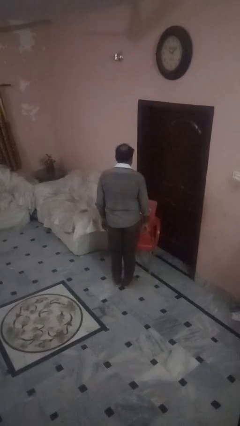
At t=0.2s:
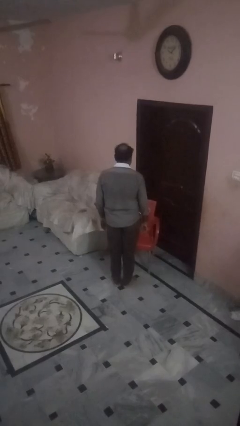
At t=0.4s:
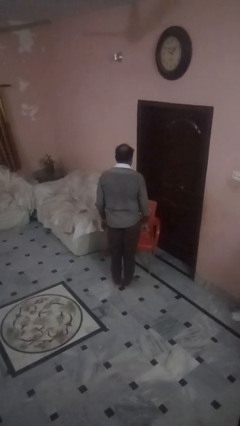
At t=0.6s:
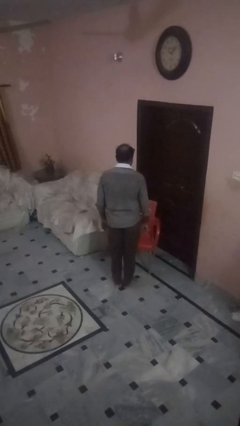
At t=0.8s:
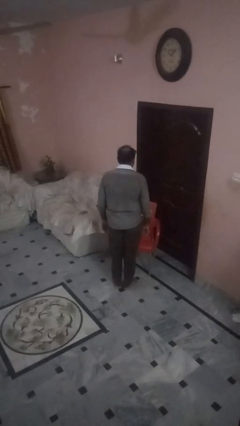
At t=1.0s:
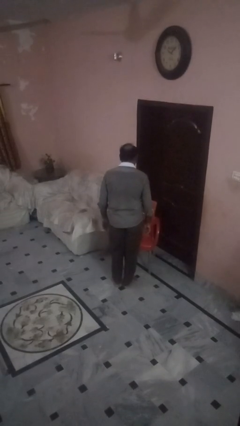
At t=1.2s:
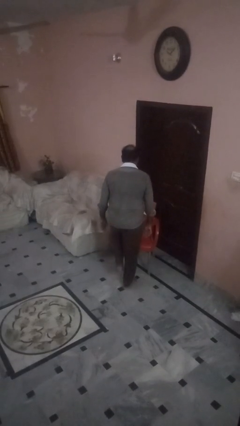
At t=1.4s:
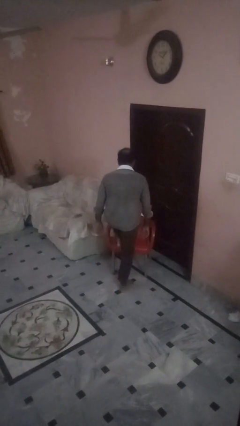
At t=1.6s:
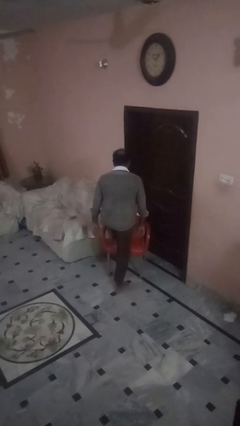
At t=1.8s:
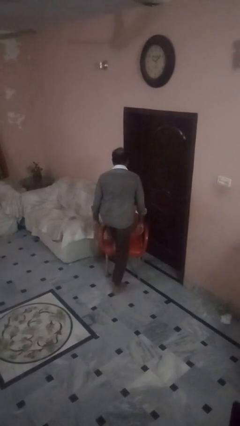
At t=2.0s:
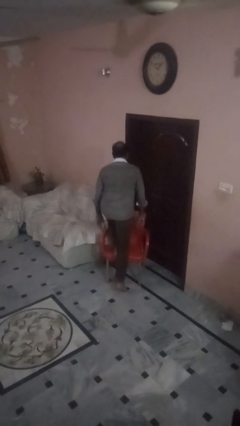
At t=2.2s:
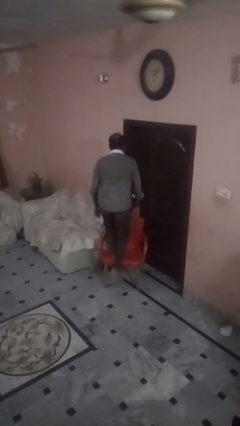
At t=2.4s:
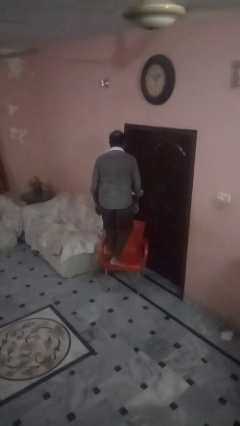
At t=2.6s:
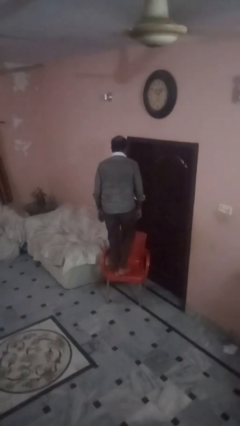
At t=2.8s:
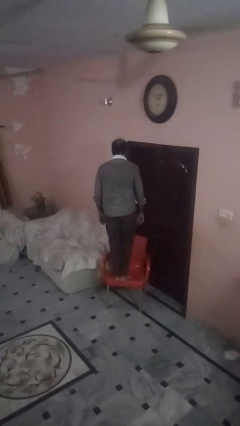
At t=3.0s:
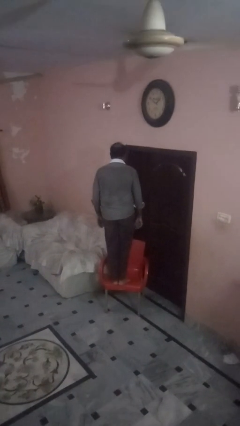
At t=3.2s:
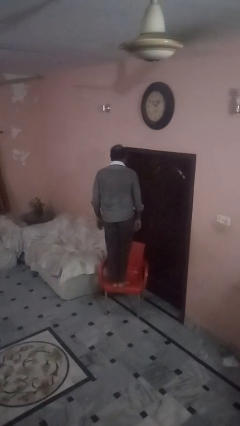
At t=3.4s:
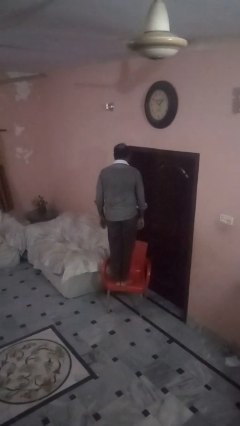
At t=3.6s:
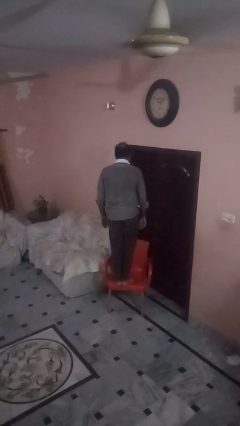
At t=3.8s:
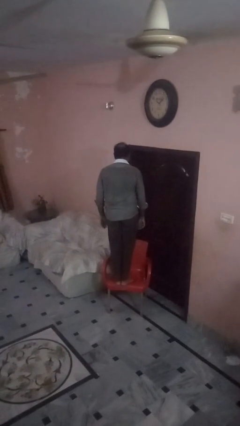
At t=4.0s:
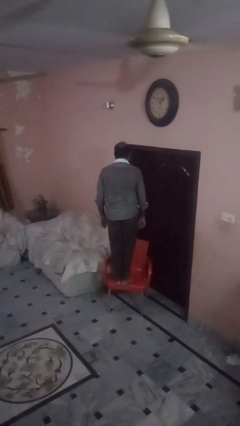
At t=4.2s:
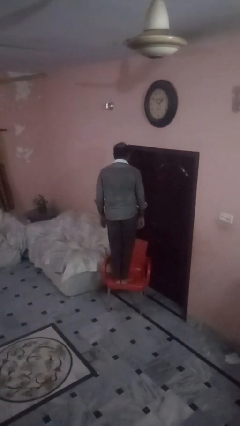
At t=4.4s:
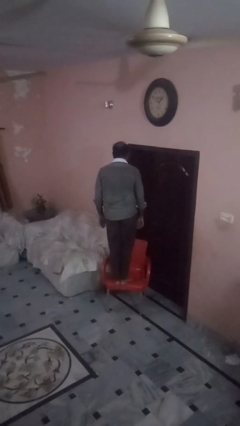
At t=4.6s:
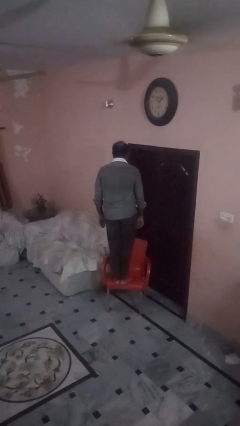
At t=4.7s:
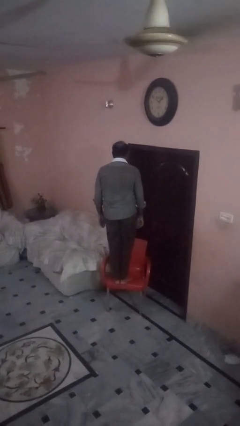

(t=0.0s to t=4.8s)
person climbs on chair

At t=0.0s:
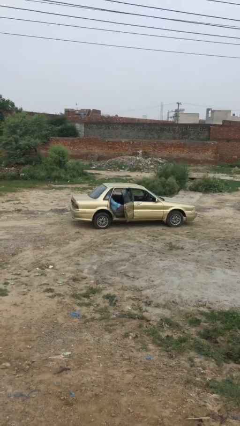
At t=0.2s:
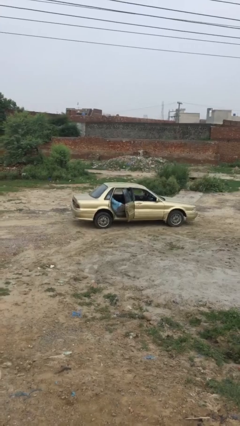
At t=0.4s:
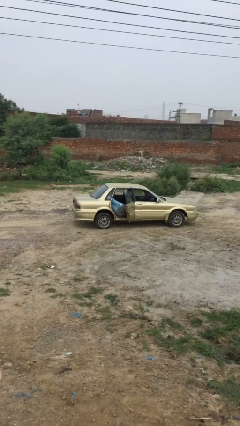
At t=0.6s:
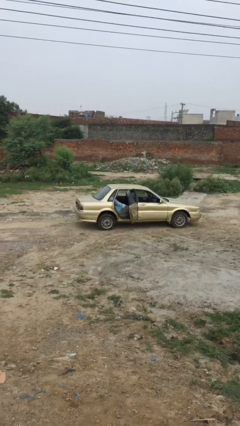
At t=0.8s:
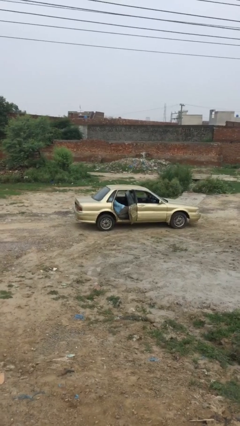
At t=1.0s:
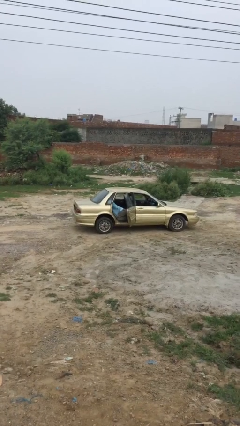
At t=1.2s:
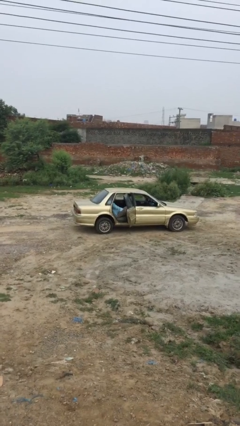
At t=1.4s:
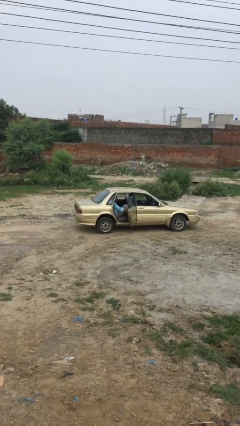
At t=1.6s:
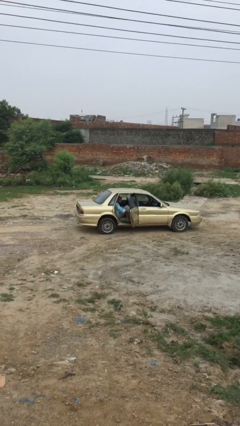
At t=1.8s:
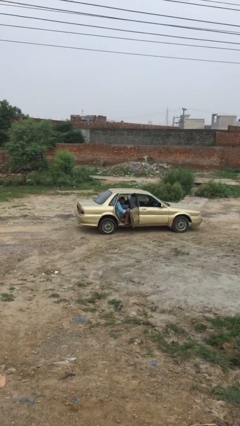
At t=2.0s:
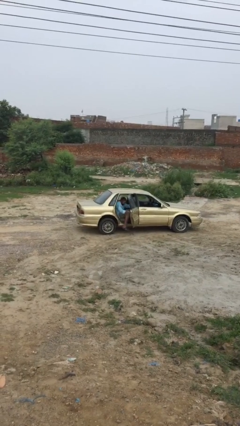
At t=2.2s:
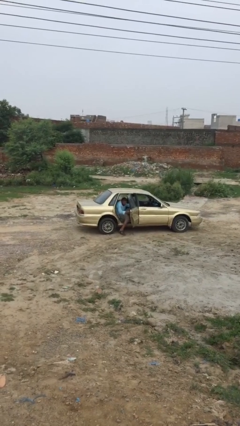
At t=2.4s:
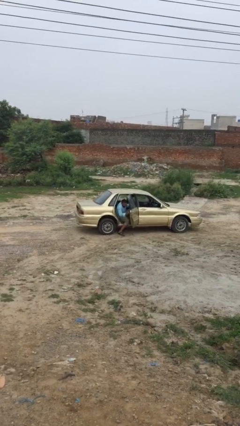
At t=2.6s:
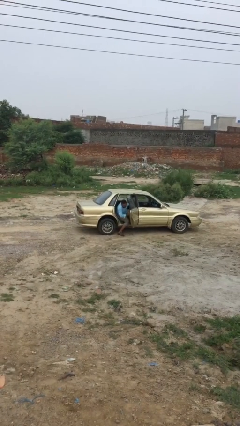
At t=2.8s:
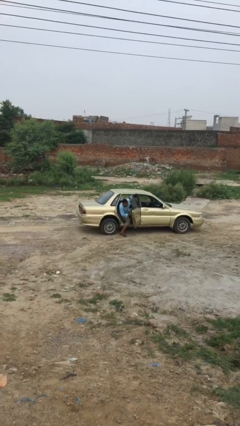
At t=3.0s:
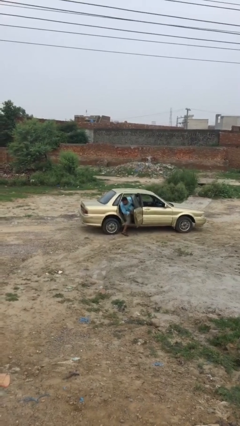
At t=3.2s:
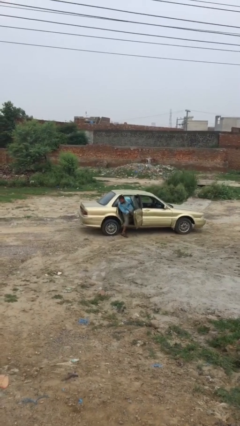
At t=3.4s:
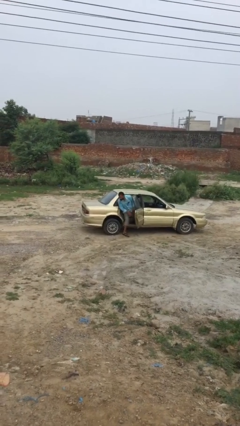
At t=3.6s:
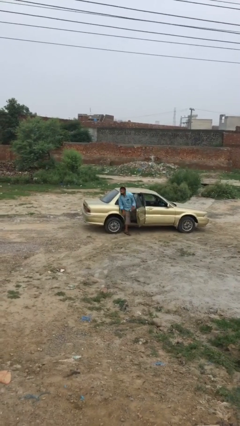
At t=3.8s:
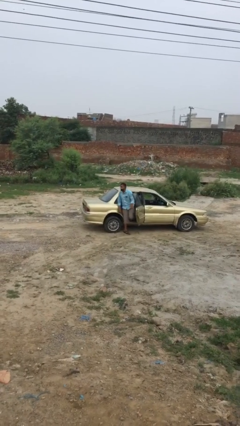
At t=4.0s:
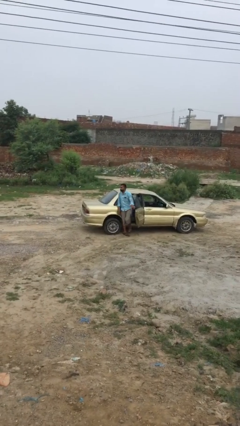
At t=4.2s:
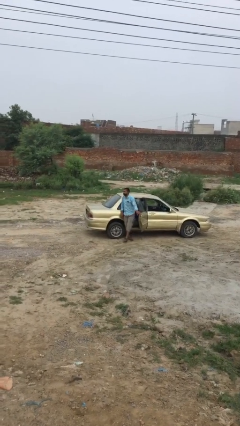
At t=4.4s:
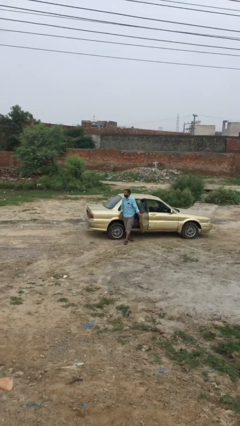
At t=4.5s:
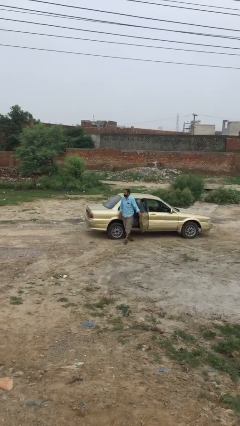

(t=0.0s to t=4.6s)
person exits car

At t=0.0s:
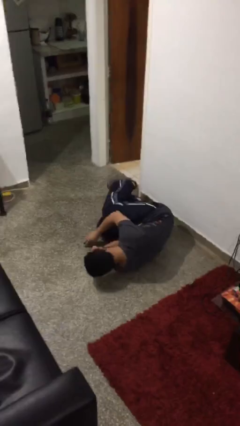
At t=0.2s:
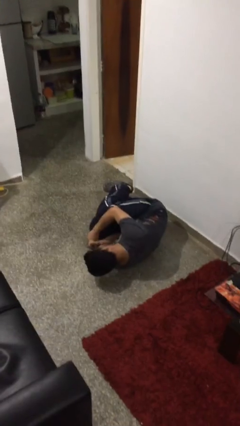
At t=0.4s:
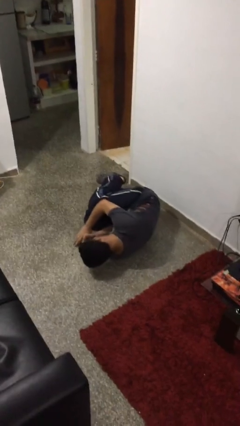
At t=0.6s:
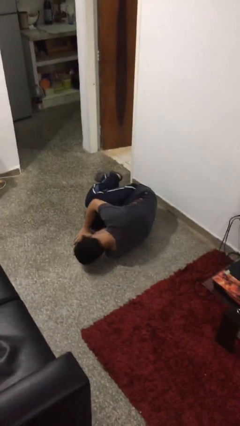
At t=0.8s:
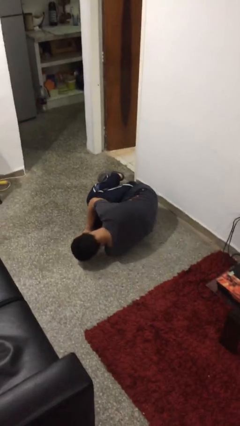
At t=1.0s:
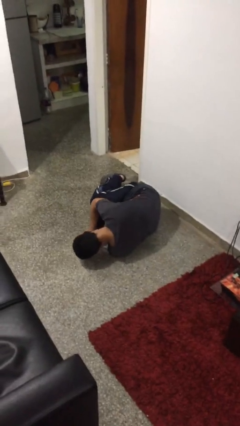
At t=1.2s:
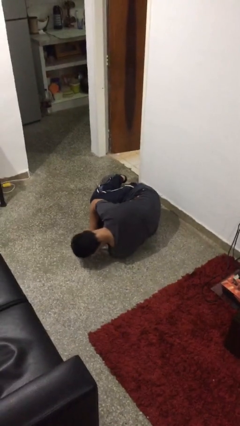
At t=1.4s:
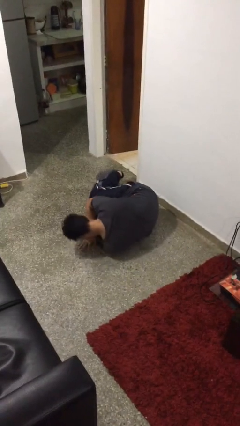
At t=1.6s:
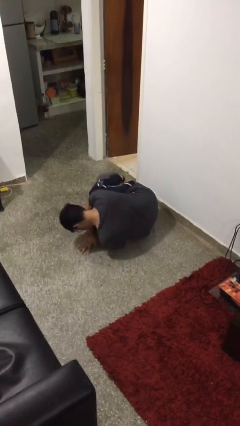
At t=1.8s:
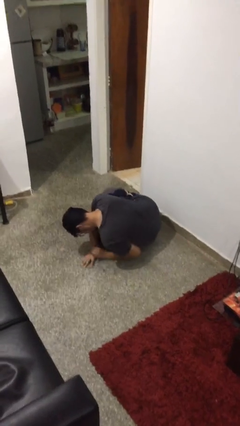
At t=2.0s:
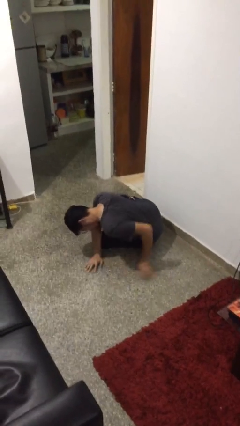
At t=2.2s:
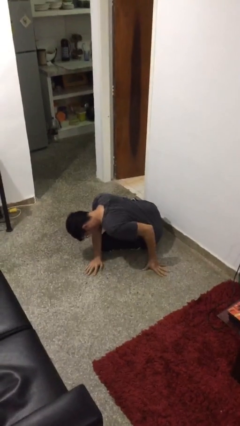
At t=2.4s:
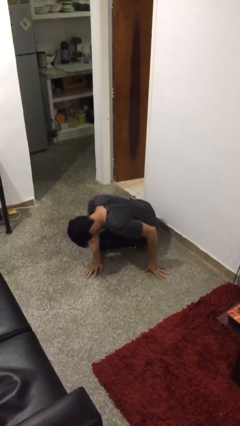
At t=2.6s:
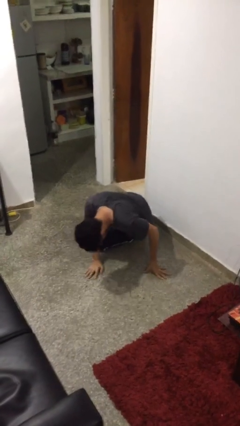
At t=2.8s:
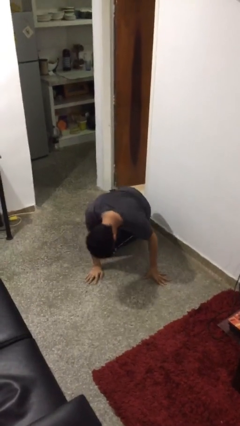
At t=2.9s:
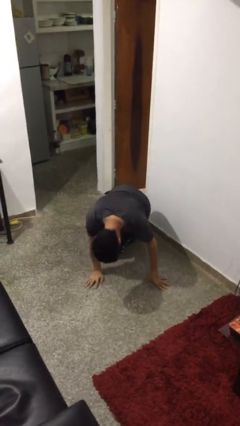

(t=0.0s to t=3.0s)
person lies down on floor

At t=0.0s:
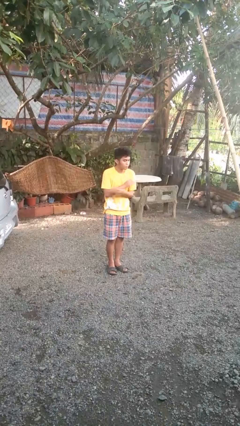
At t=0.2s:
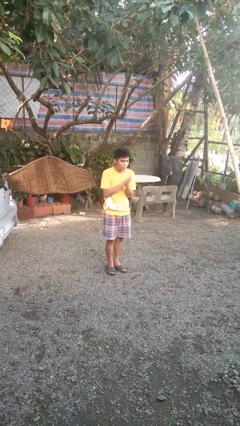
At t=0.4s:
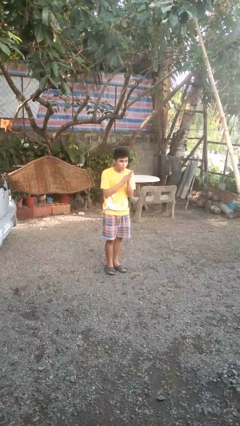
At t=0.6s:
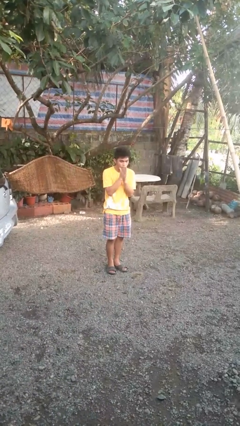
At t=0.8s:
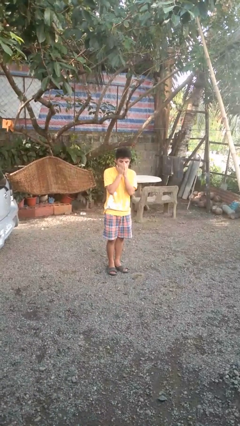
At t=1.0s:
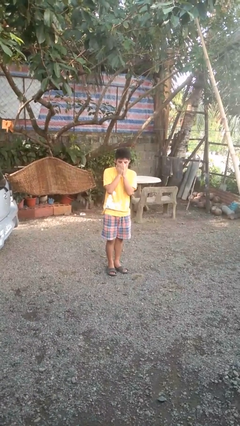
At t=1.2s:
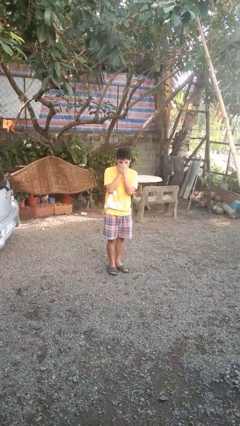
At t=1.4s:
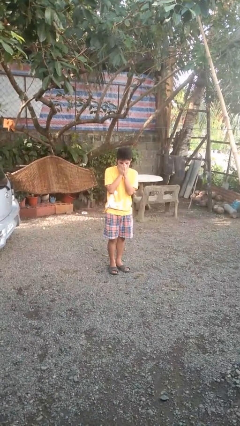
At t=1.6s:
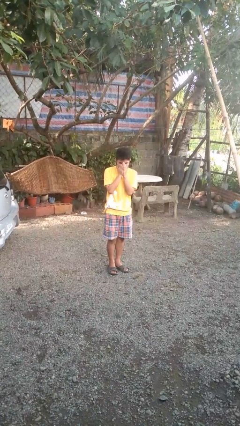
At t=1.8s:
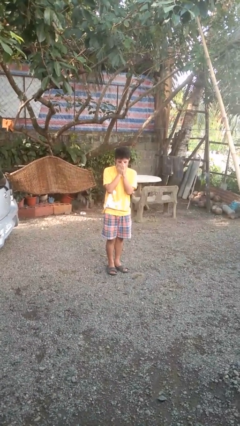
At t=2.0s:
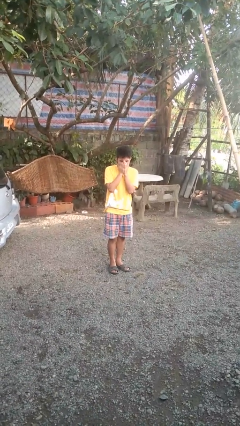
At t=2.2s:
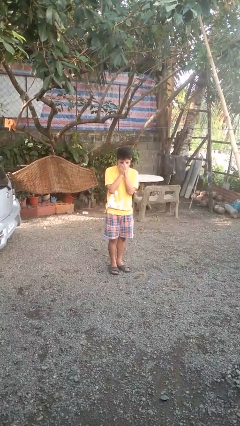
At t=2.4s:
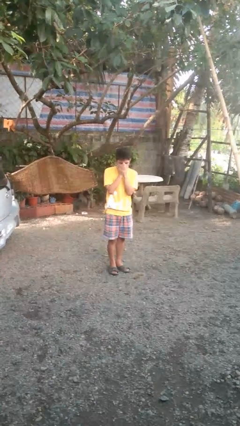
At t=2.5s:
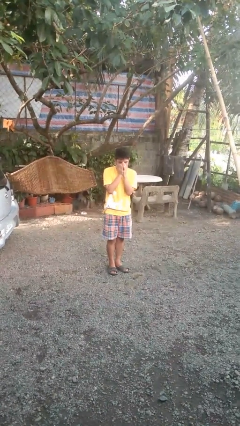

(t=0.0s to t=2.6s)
person blows into hands

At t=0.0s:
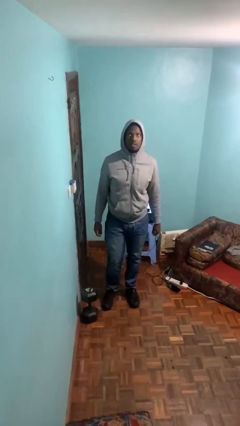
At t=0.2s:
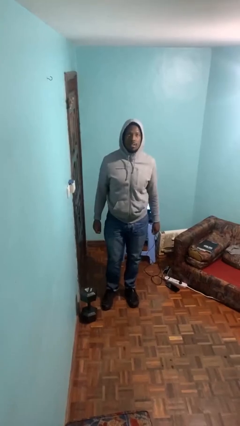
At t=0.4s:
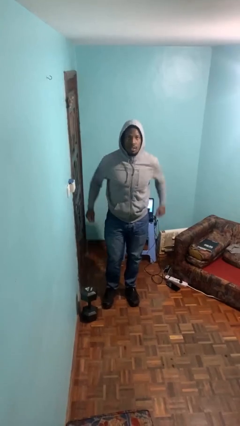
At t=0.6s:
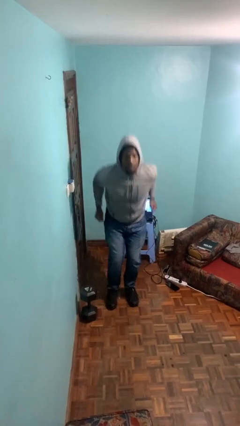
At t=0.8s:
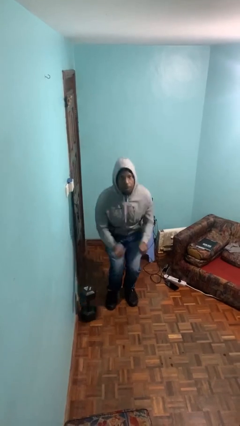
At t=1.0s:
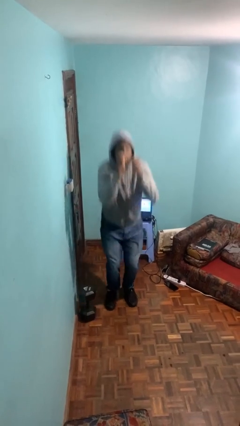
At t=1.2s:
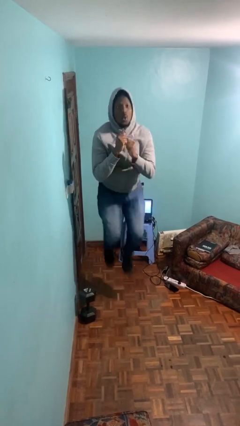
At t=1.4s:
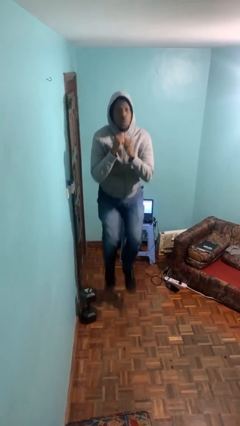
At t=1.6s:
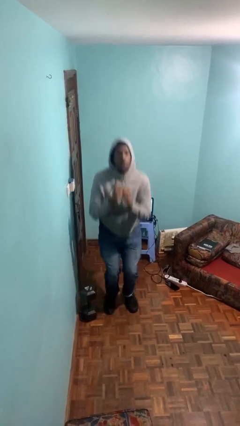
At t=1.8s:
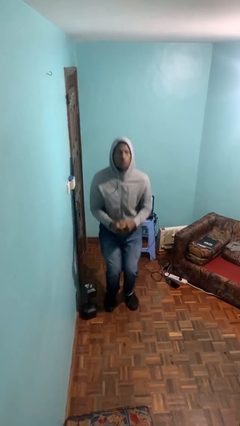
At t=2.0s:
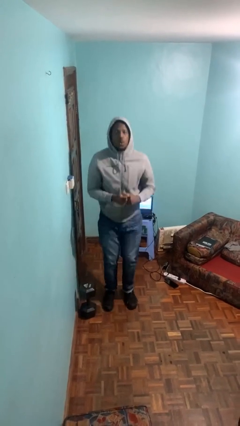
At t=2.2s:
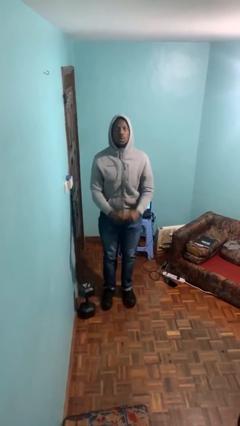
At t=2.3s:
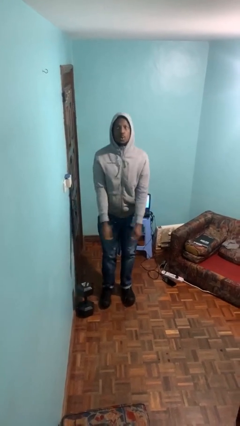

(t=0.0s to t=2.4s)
person jumps
